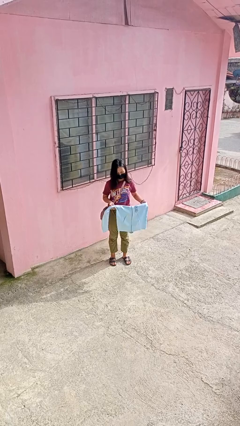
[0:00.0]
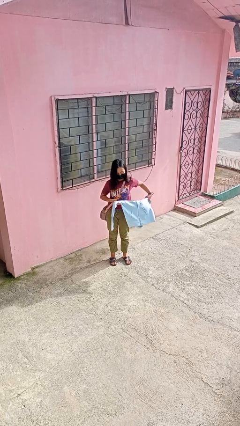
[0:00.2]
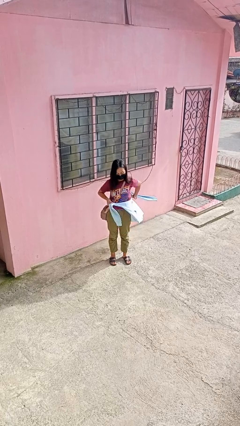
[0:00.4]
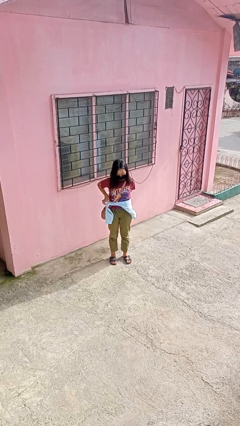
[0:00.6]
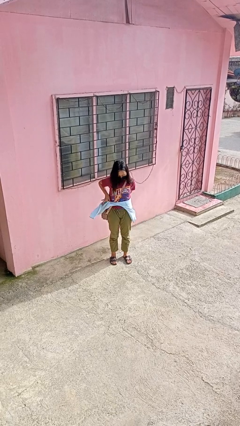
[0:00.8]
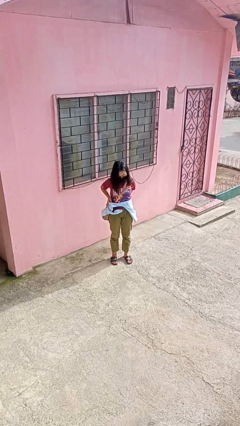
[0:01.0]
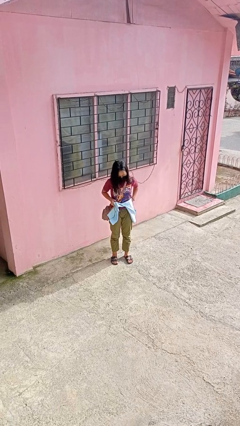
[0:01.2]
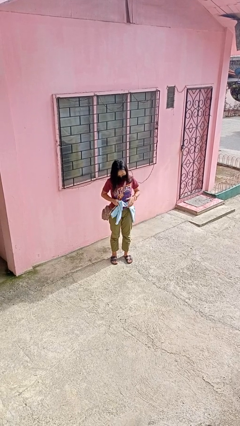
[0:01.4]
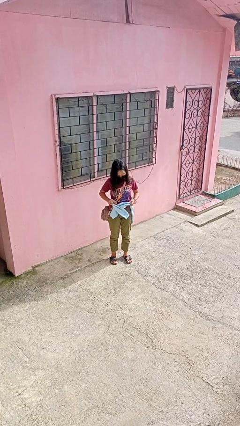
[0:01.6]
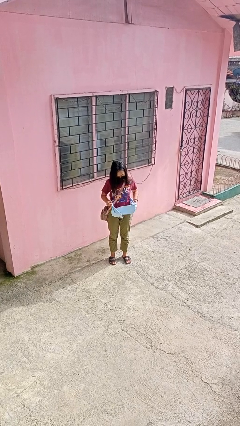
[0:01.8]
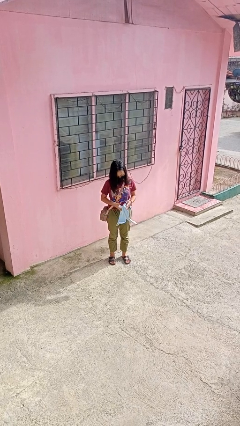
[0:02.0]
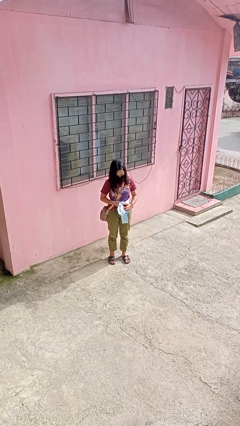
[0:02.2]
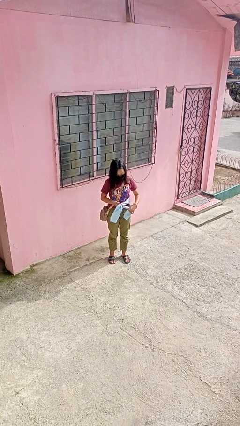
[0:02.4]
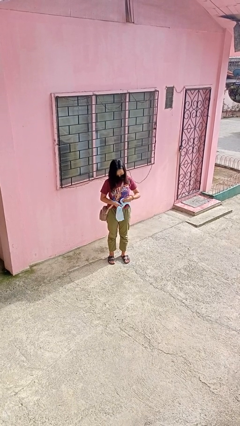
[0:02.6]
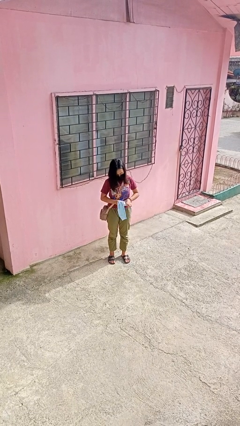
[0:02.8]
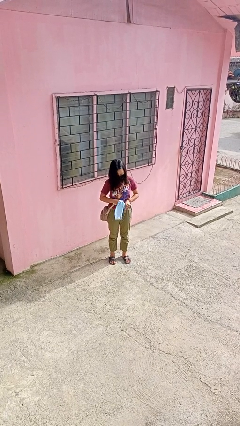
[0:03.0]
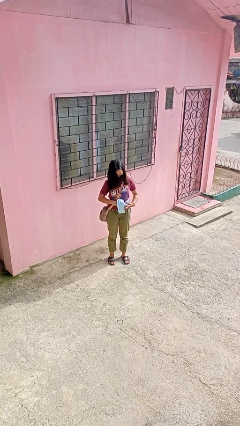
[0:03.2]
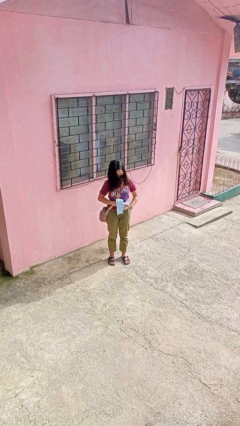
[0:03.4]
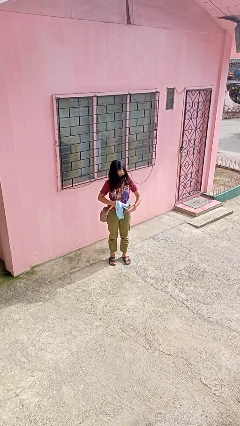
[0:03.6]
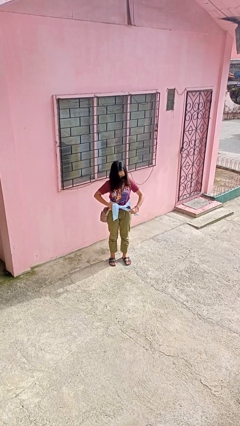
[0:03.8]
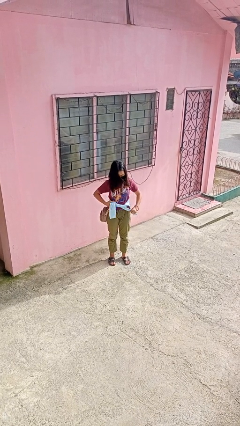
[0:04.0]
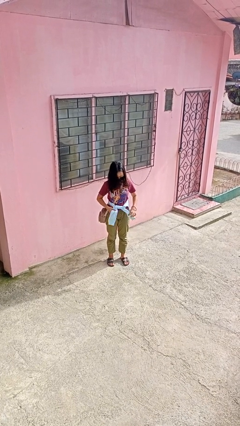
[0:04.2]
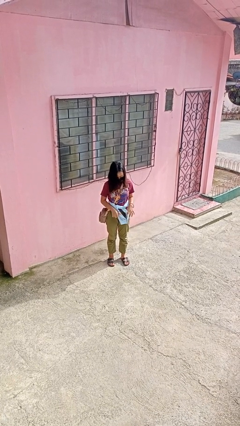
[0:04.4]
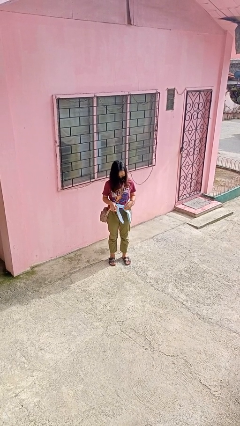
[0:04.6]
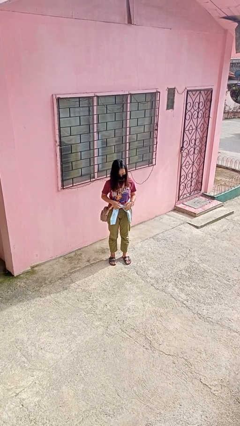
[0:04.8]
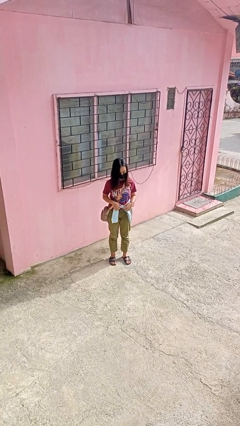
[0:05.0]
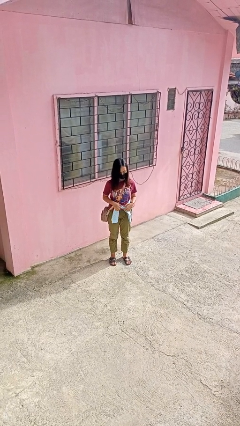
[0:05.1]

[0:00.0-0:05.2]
person ties jacket around waist

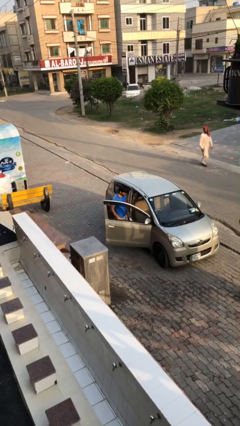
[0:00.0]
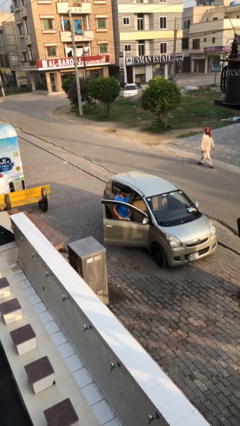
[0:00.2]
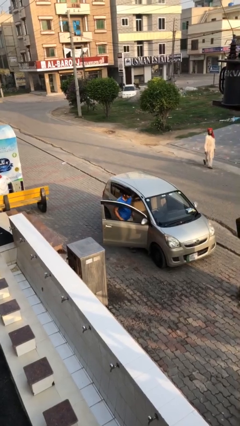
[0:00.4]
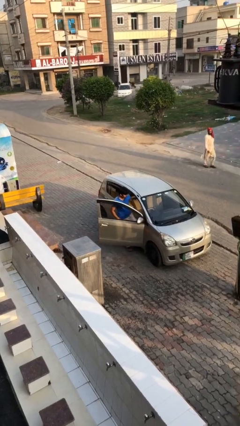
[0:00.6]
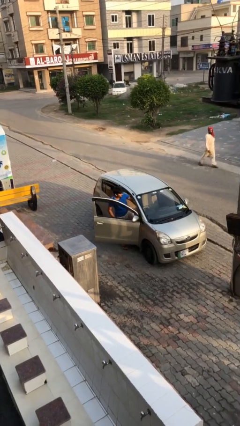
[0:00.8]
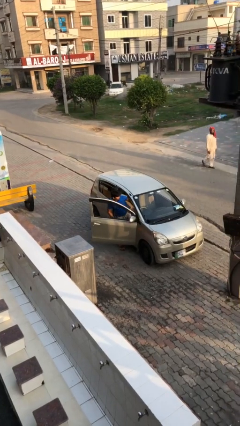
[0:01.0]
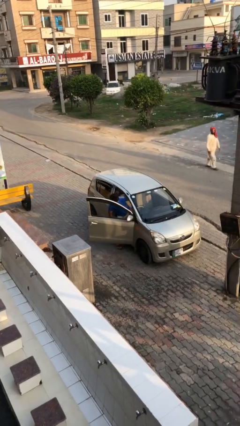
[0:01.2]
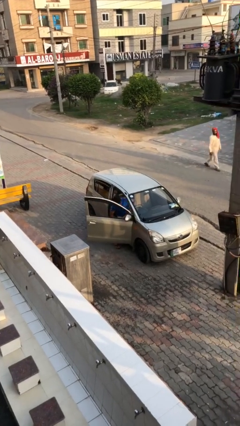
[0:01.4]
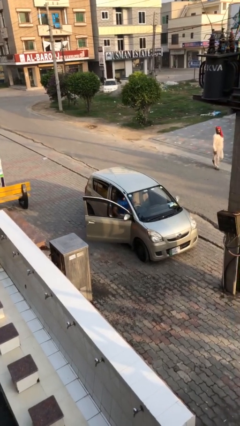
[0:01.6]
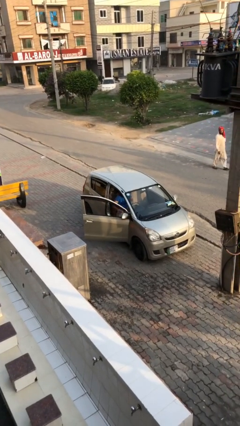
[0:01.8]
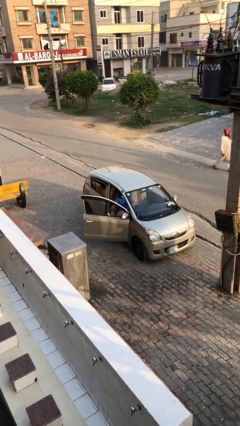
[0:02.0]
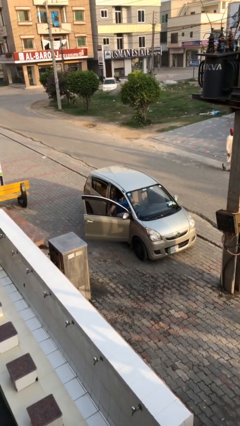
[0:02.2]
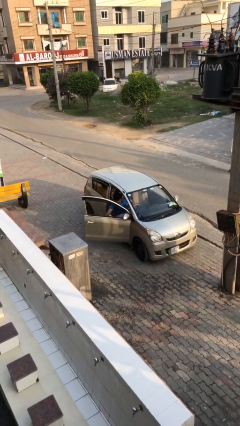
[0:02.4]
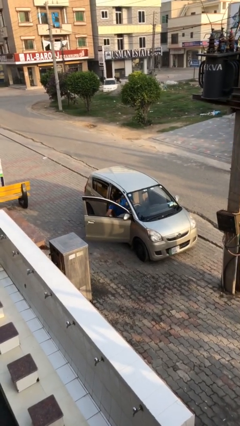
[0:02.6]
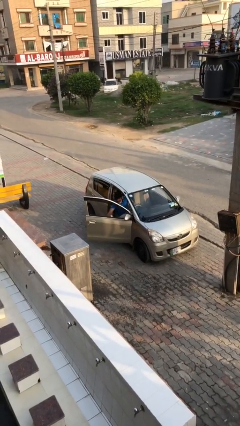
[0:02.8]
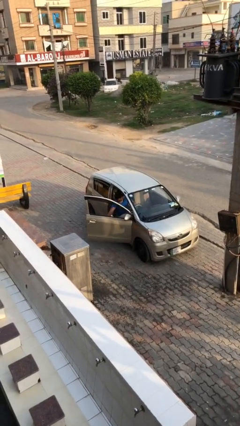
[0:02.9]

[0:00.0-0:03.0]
person enters car

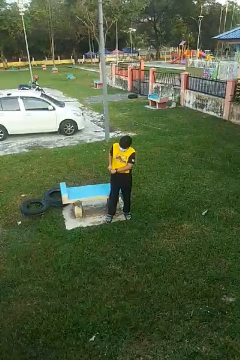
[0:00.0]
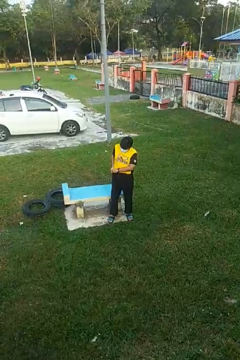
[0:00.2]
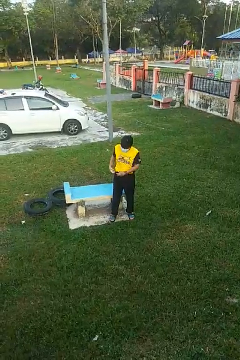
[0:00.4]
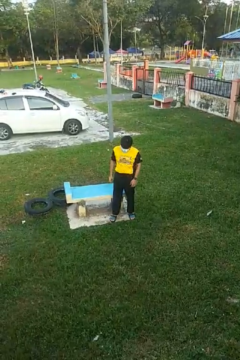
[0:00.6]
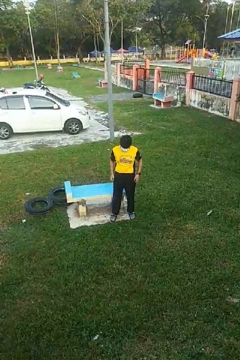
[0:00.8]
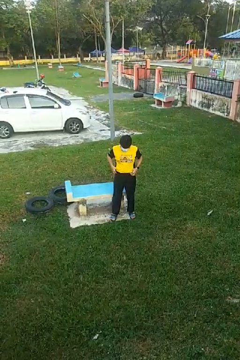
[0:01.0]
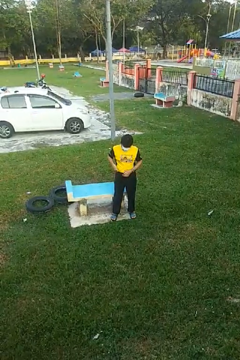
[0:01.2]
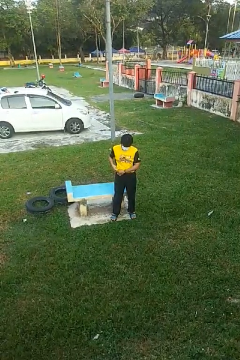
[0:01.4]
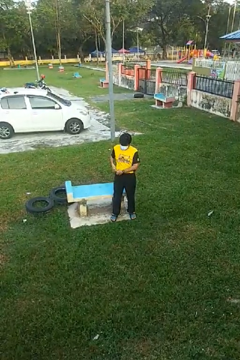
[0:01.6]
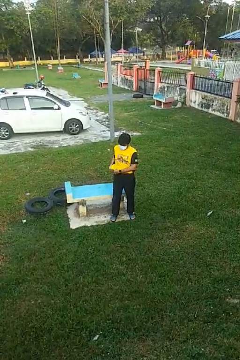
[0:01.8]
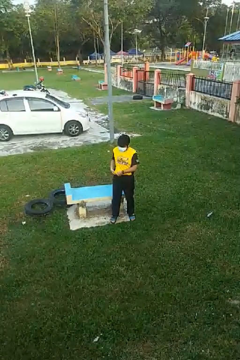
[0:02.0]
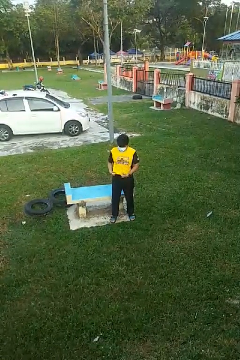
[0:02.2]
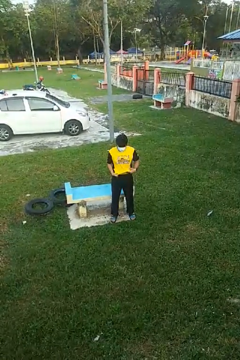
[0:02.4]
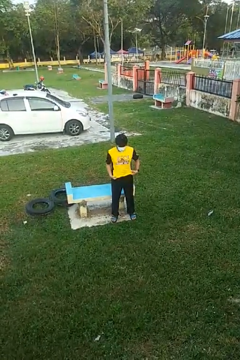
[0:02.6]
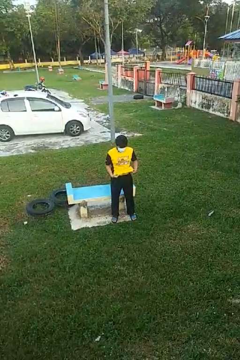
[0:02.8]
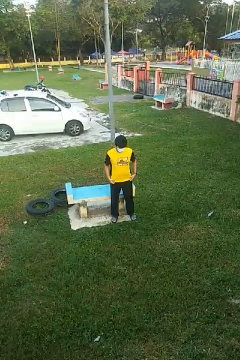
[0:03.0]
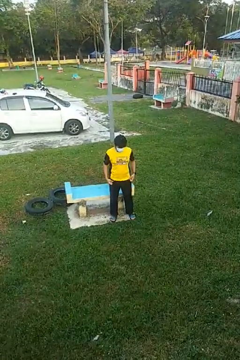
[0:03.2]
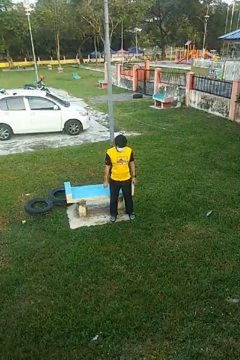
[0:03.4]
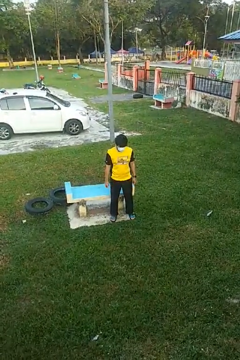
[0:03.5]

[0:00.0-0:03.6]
person untucks shirt

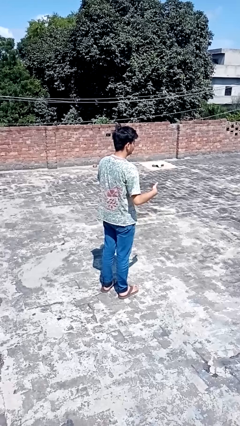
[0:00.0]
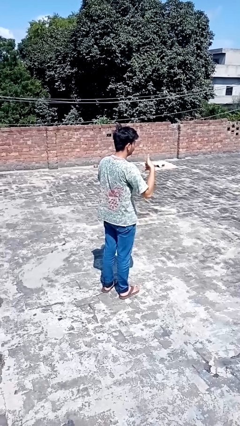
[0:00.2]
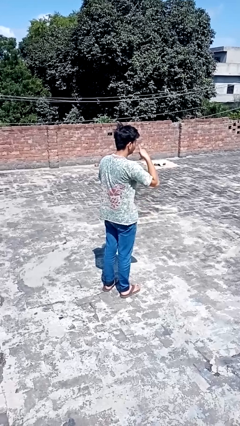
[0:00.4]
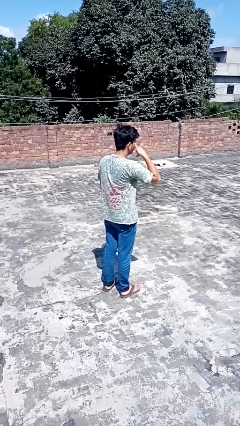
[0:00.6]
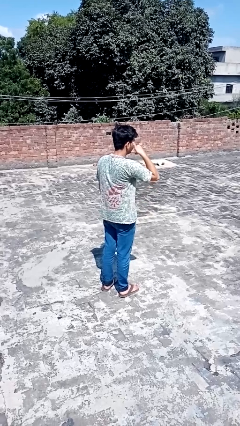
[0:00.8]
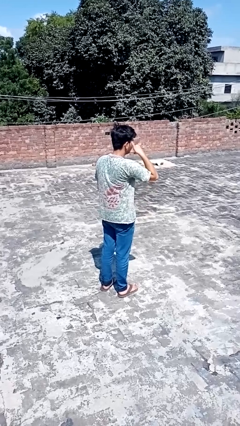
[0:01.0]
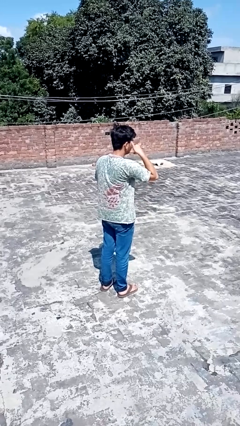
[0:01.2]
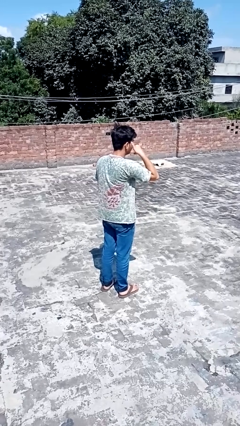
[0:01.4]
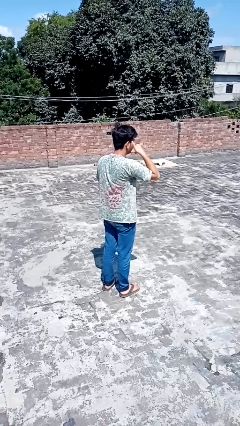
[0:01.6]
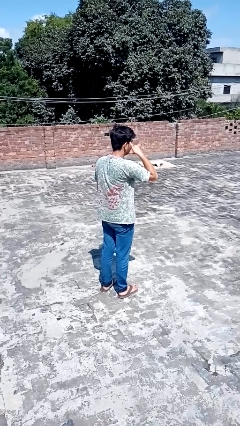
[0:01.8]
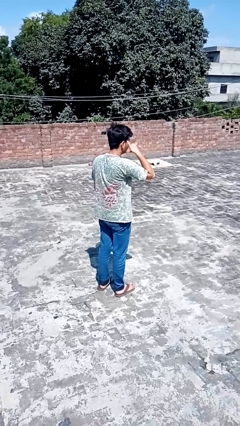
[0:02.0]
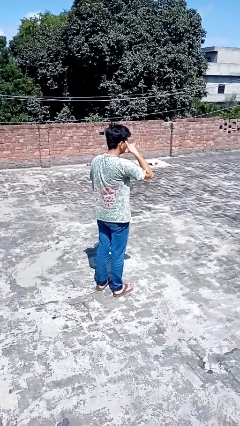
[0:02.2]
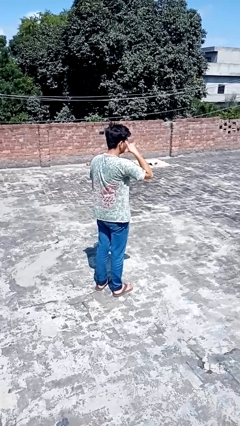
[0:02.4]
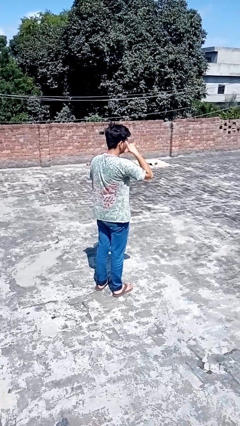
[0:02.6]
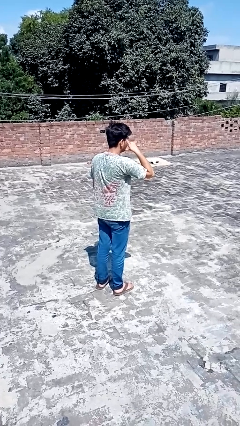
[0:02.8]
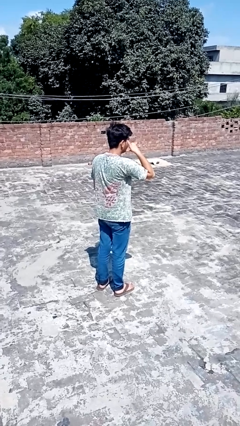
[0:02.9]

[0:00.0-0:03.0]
person gestures call me

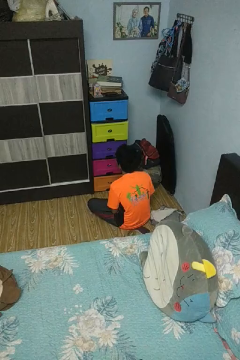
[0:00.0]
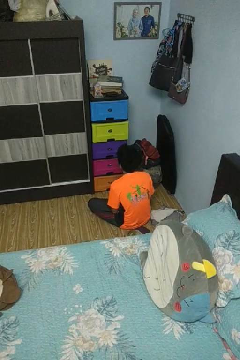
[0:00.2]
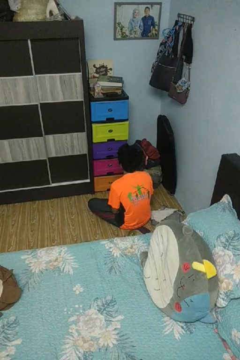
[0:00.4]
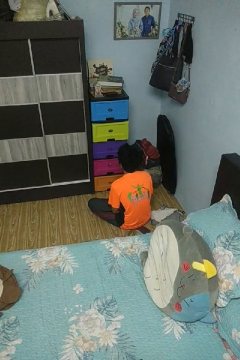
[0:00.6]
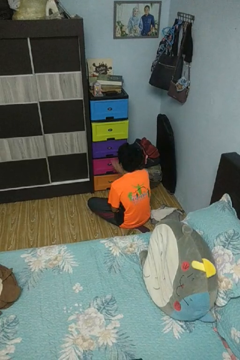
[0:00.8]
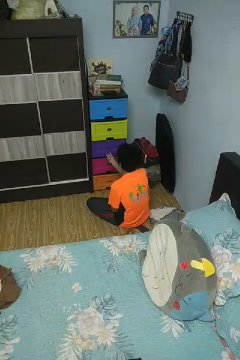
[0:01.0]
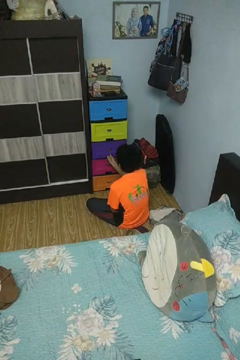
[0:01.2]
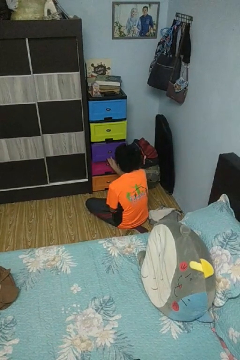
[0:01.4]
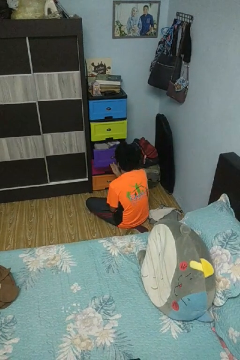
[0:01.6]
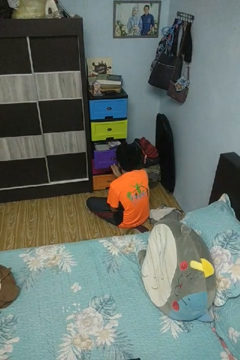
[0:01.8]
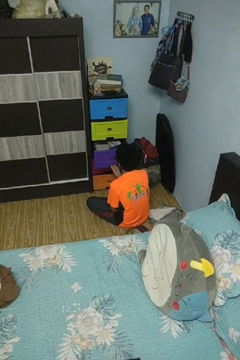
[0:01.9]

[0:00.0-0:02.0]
person opens dresser drawer

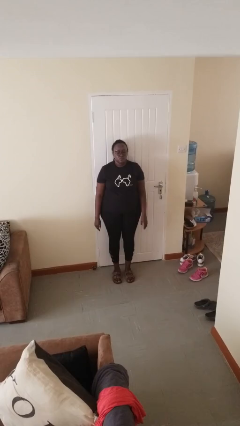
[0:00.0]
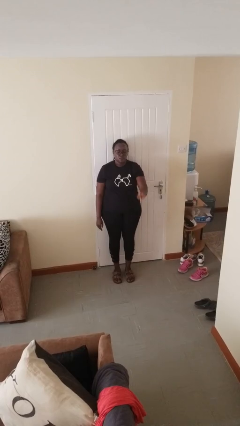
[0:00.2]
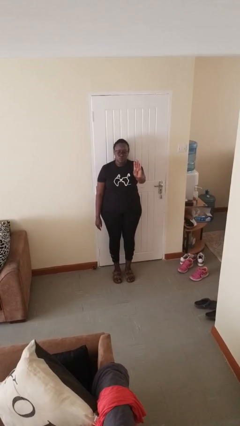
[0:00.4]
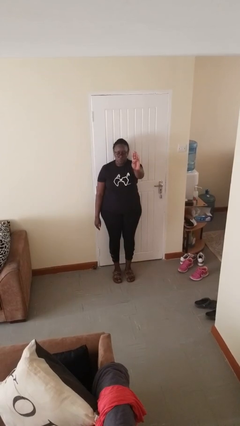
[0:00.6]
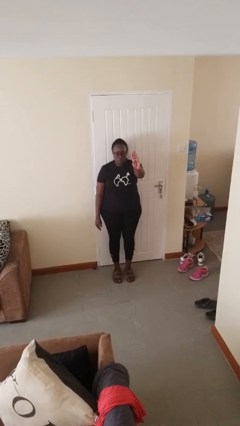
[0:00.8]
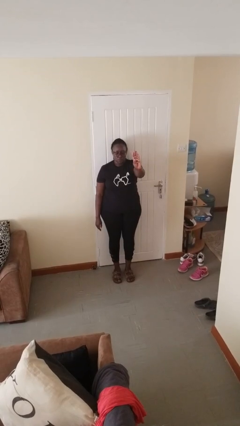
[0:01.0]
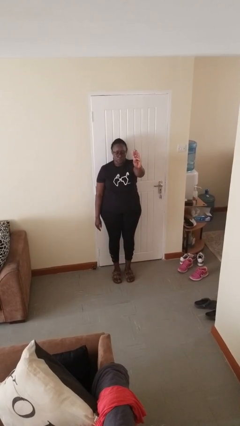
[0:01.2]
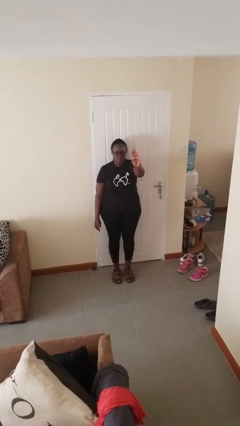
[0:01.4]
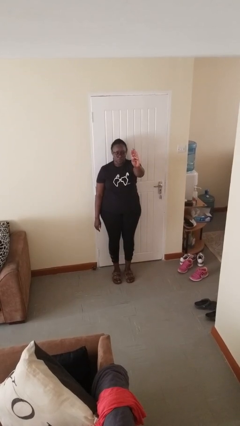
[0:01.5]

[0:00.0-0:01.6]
person gestures number four
